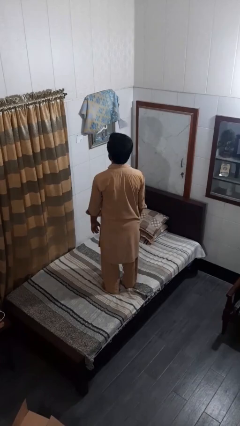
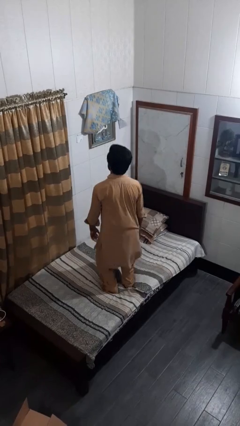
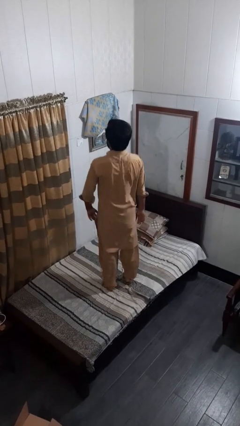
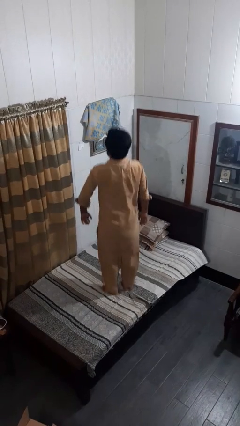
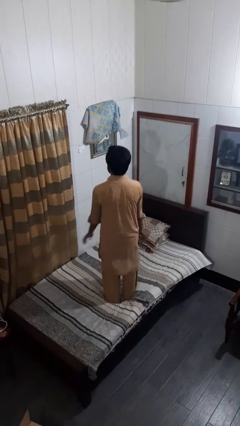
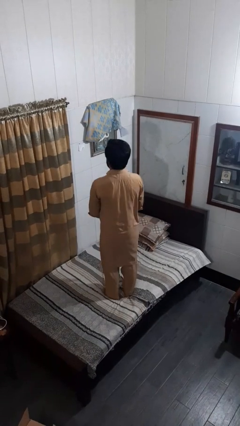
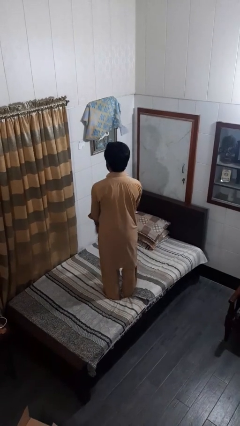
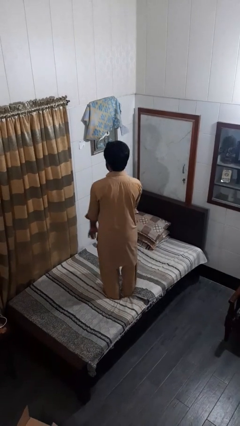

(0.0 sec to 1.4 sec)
person jumps on bed

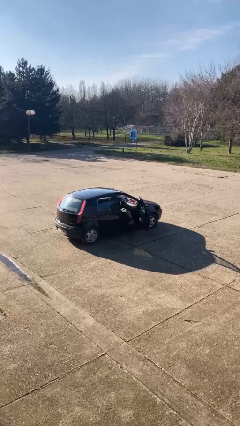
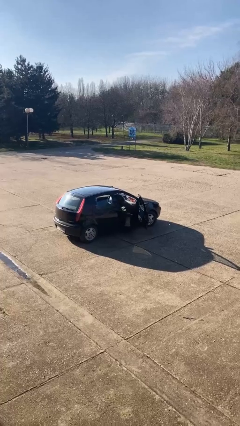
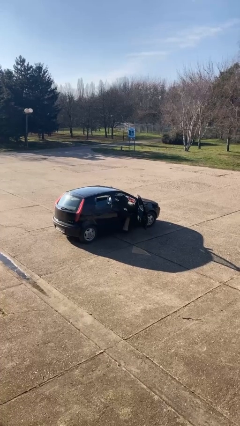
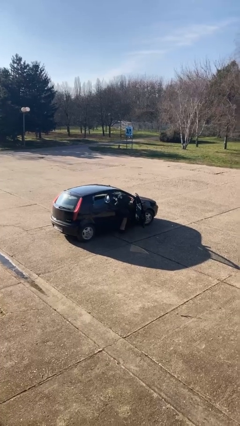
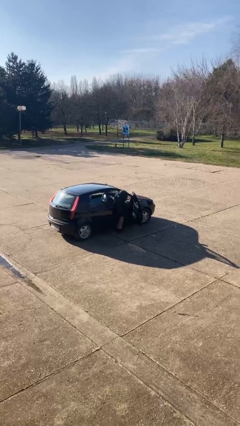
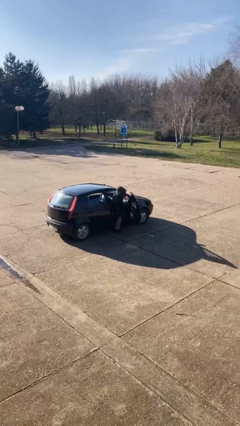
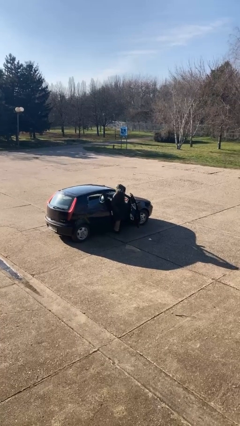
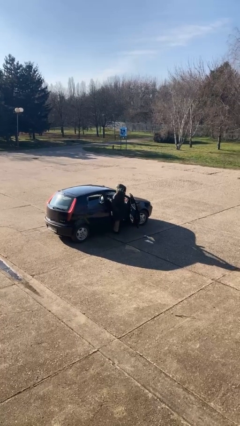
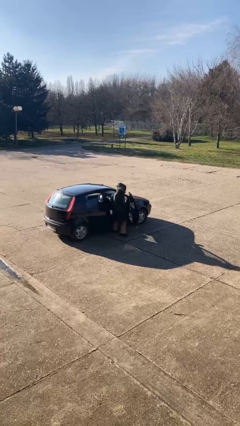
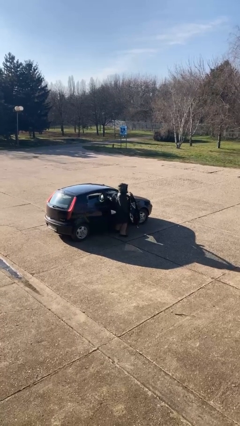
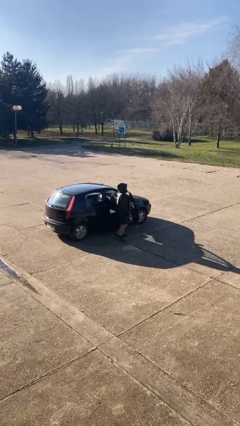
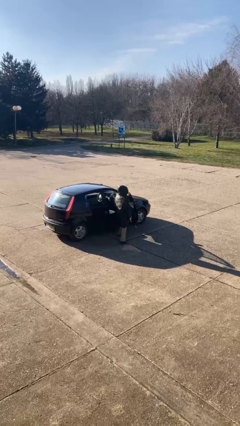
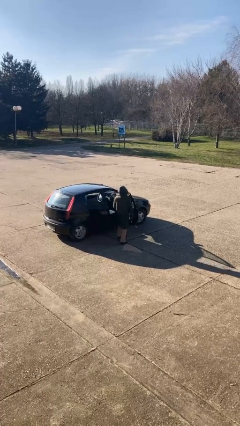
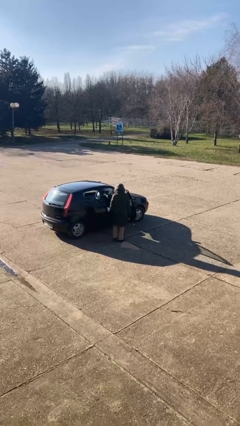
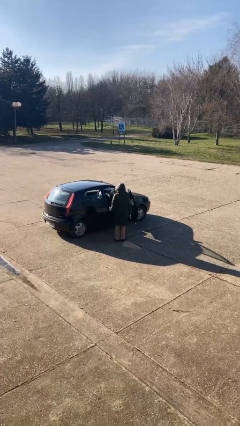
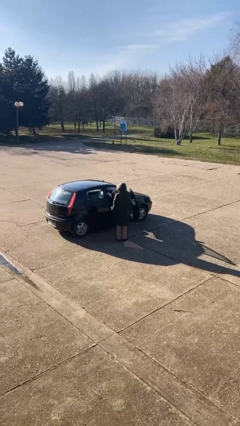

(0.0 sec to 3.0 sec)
person exits car

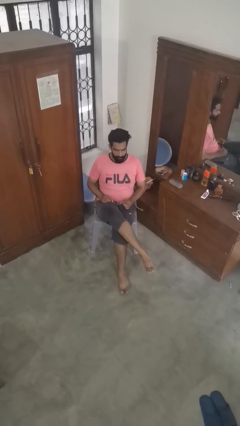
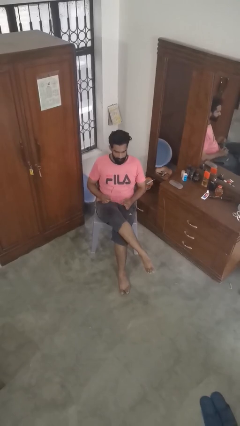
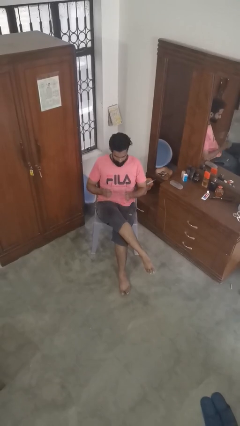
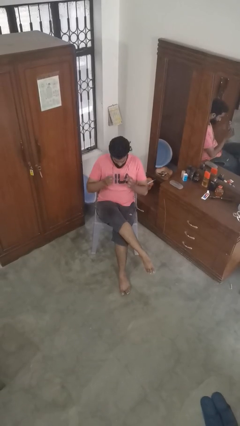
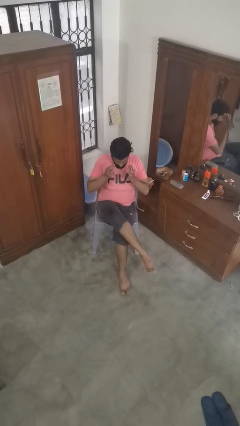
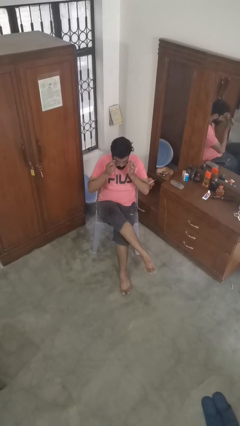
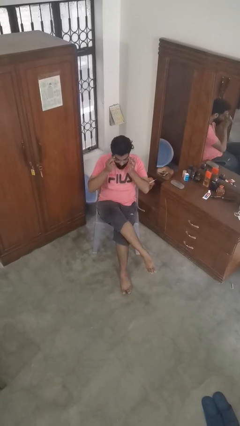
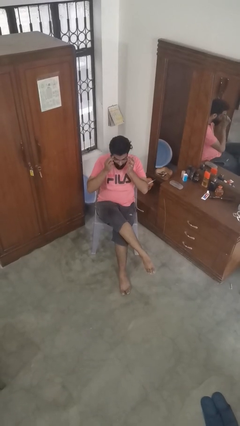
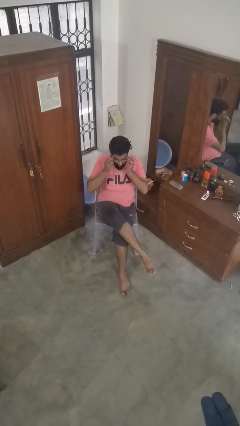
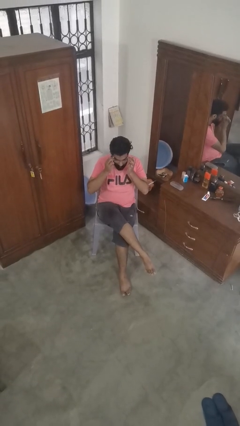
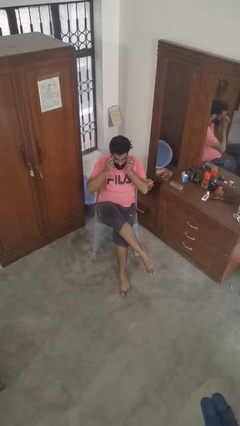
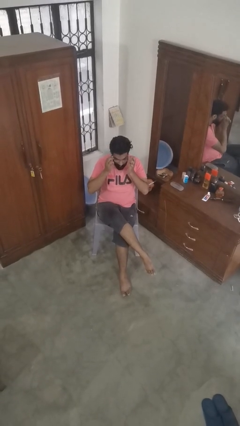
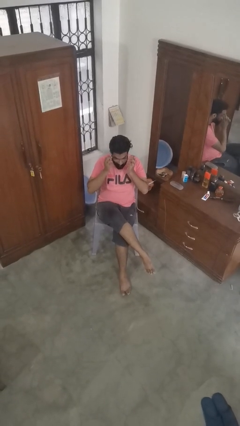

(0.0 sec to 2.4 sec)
person puts on glasses

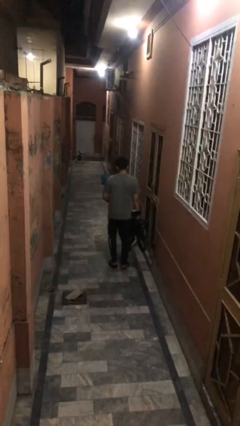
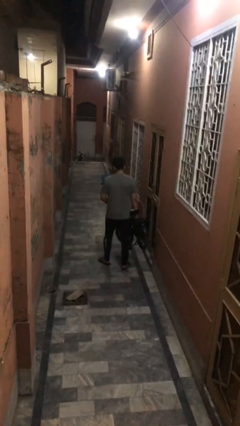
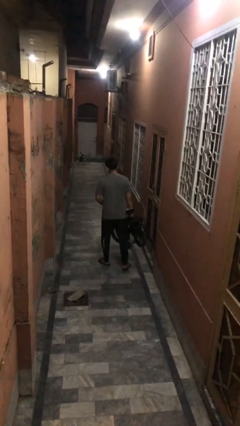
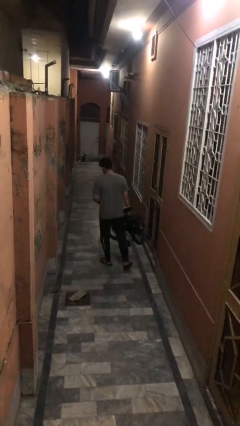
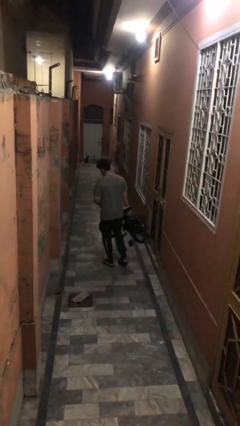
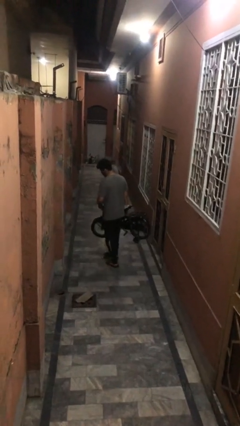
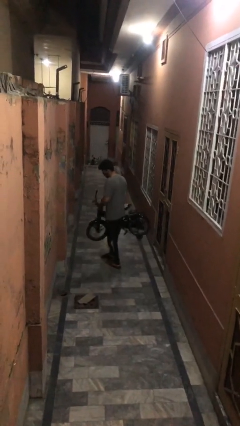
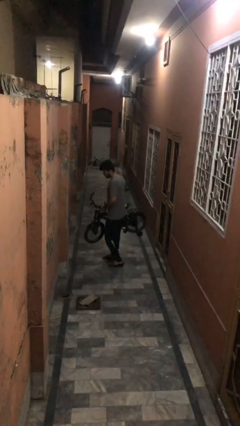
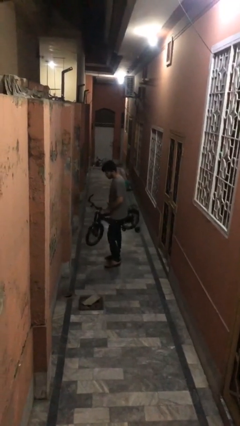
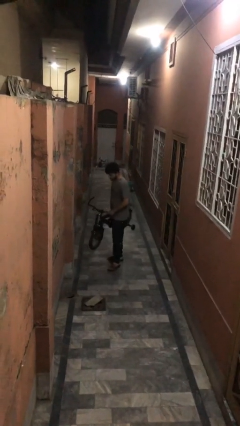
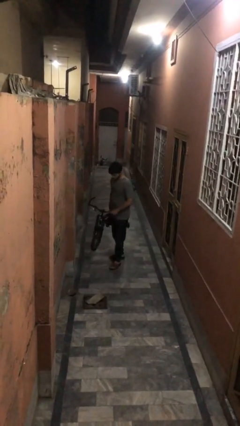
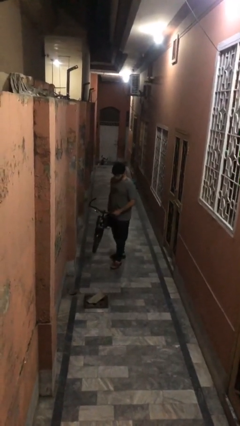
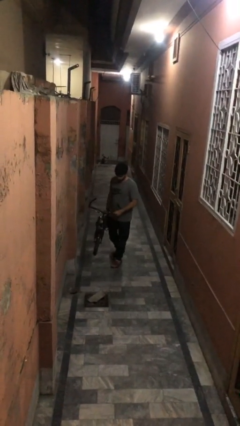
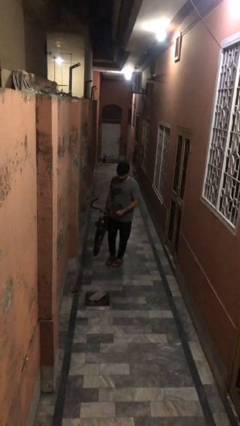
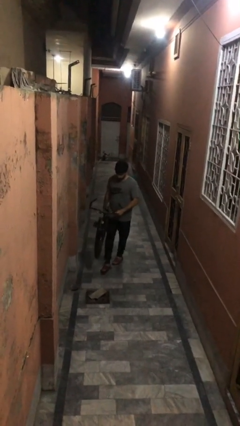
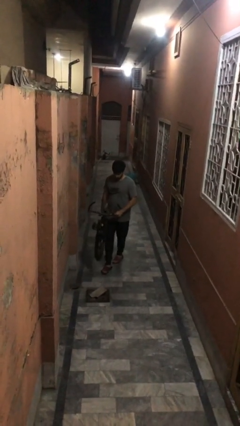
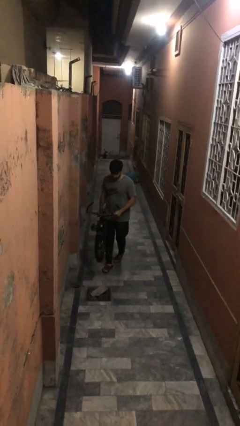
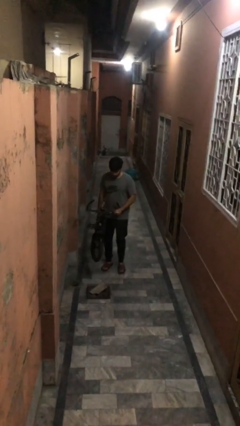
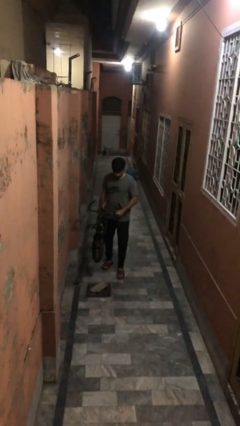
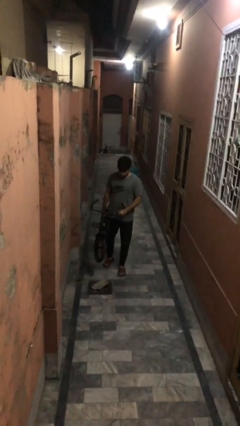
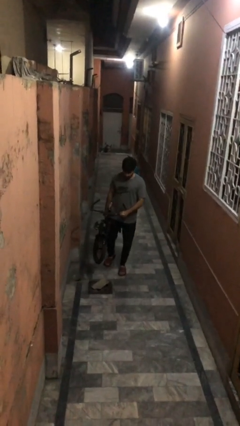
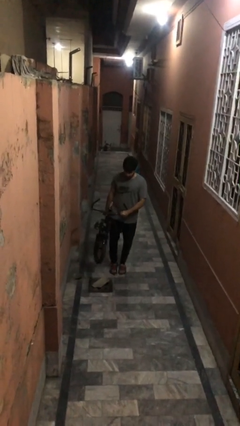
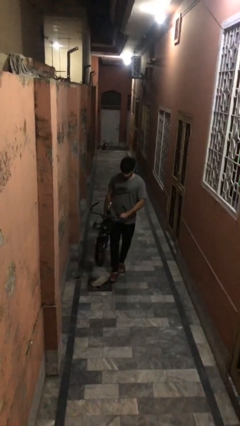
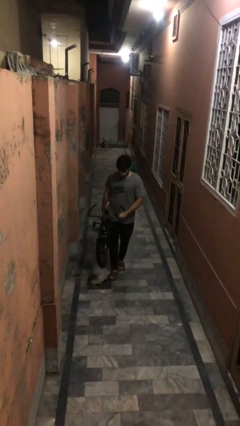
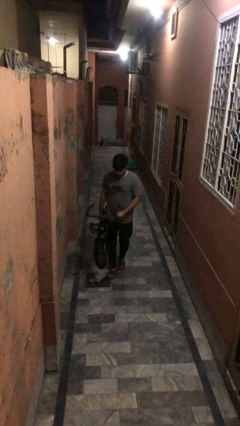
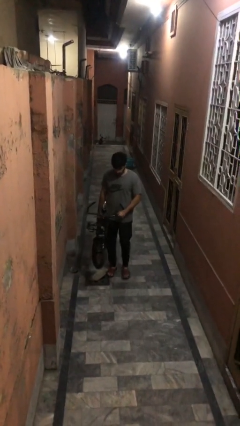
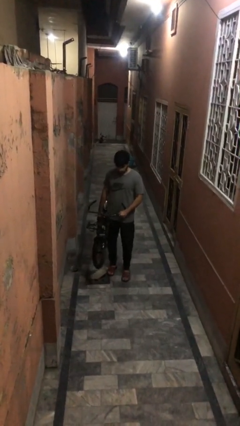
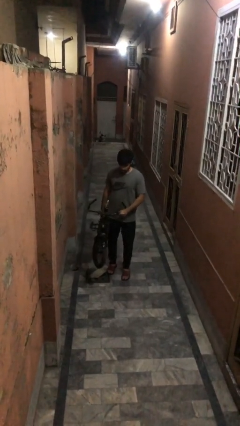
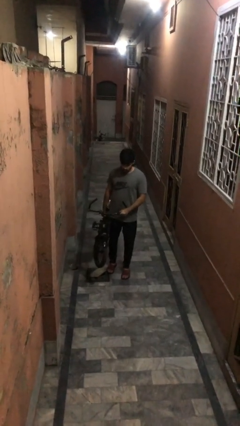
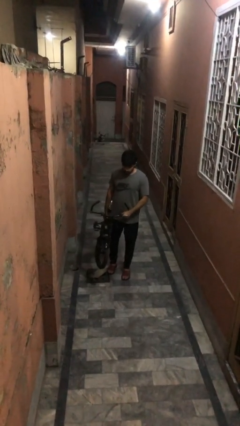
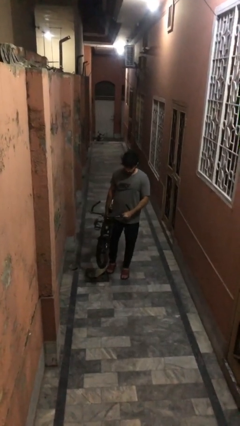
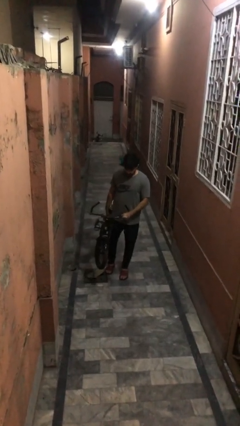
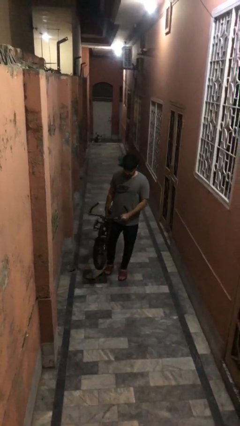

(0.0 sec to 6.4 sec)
person carries bicycle

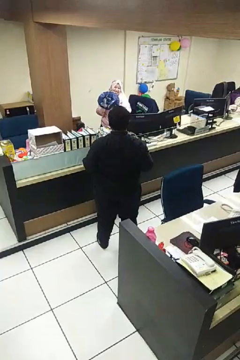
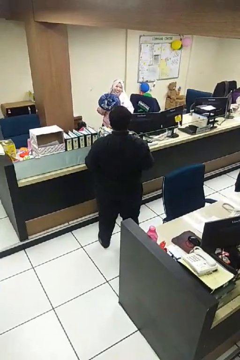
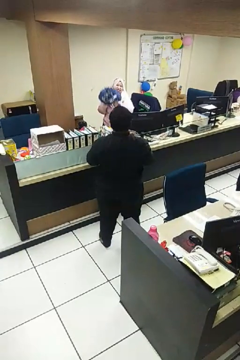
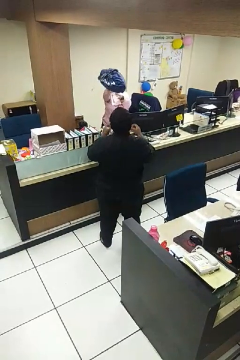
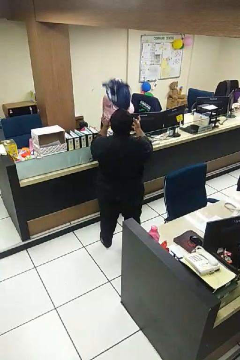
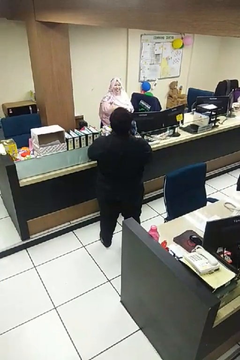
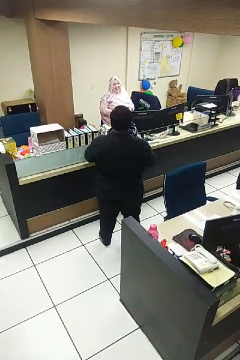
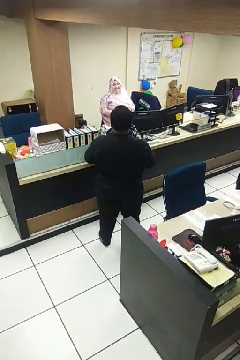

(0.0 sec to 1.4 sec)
person catches object from person

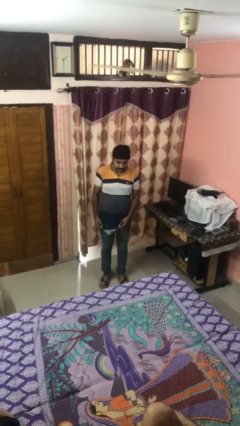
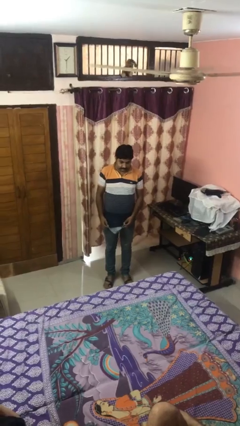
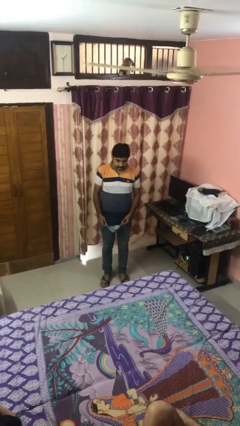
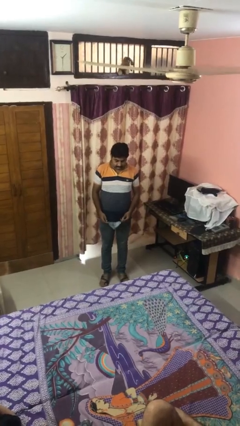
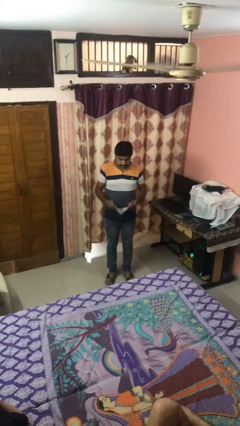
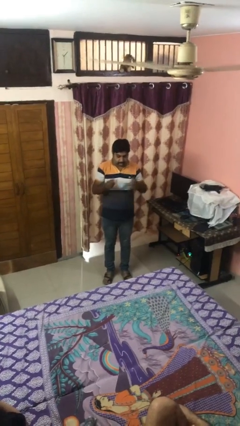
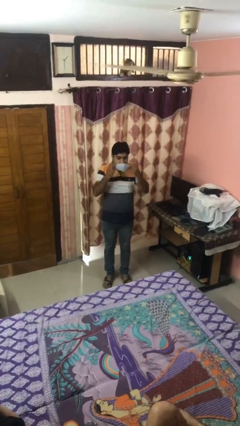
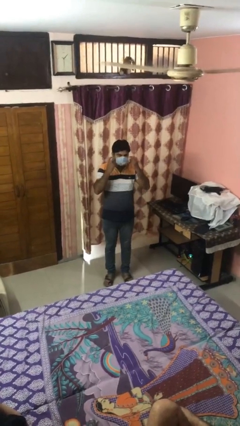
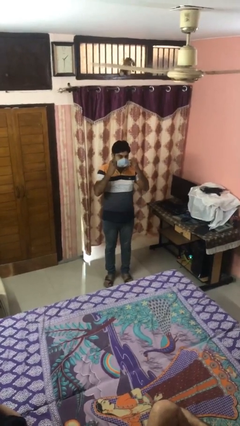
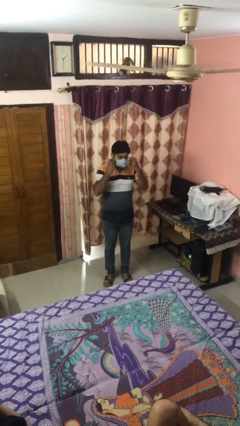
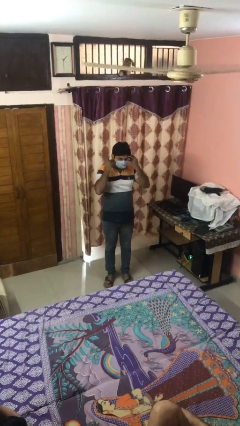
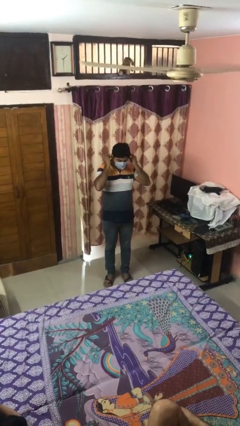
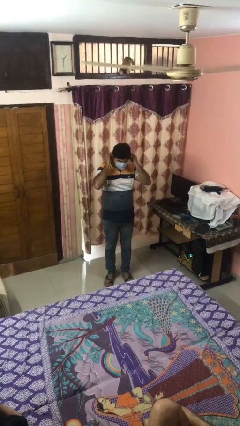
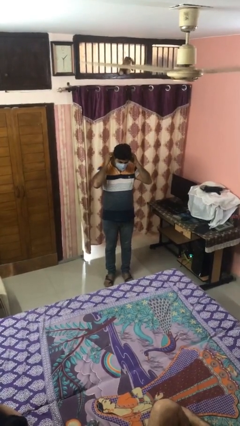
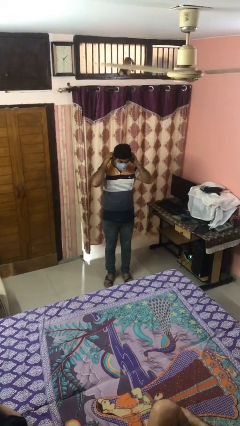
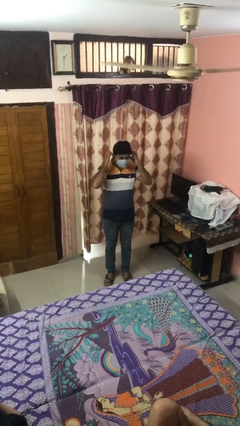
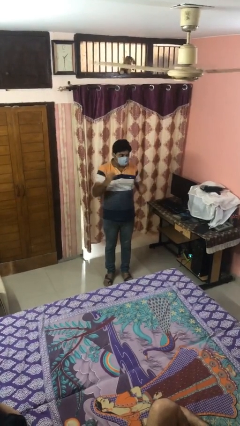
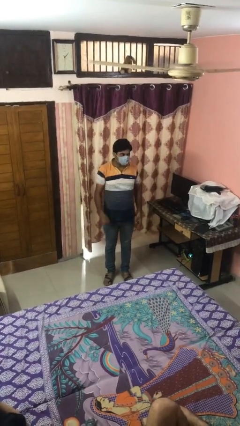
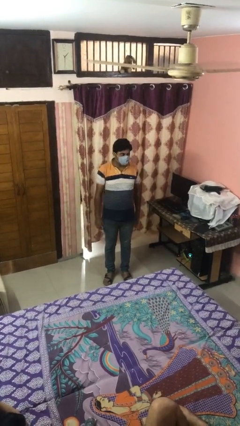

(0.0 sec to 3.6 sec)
person puts on facemask
